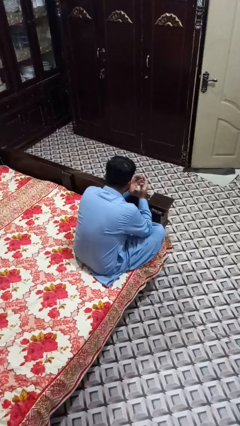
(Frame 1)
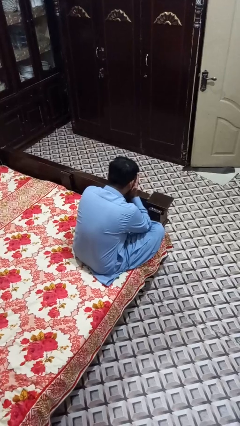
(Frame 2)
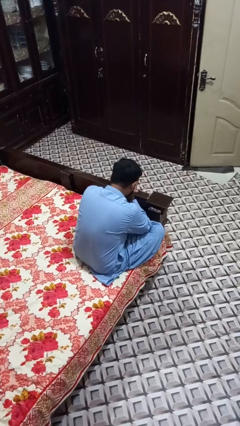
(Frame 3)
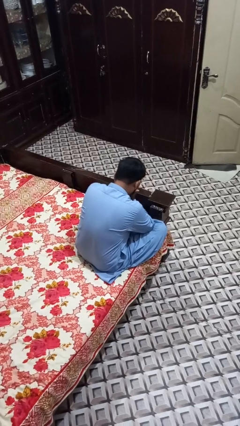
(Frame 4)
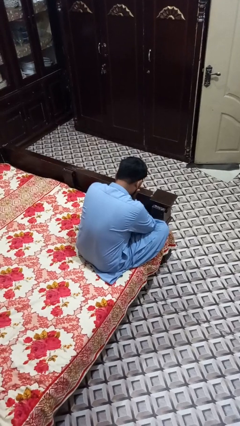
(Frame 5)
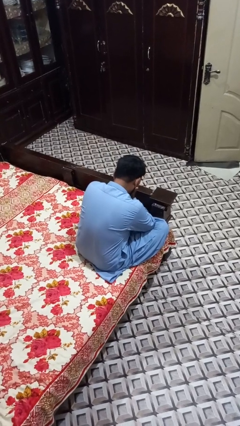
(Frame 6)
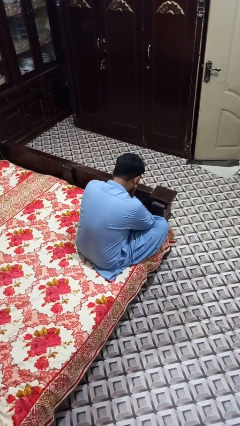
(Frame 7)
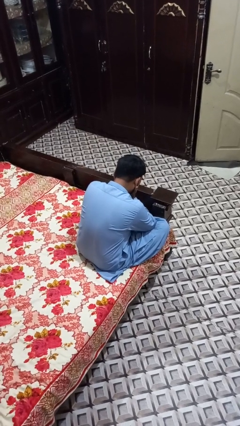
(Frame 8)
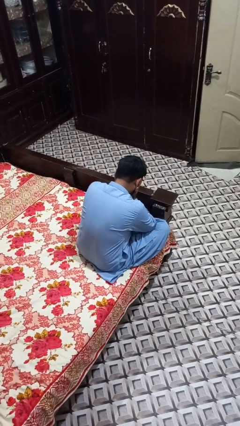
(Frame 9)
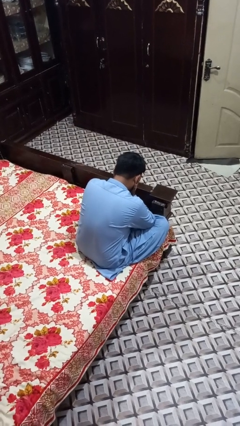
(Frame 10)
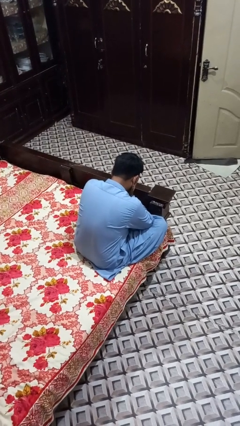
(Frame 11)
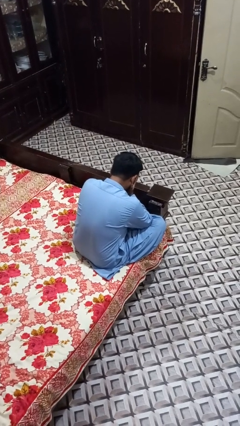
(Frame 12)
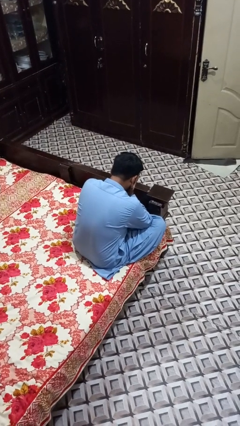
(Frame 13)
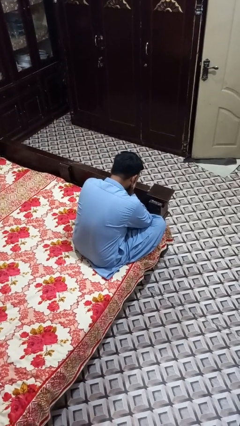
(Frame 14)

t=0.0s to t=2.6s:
person covers face with hands

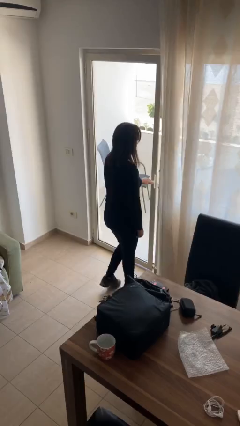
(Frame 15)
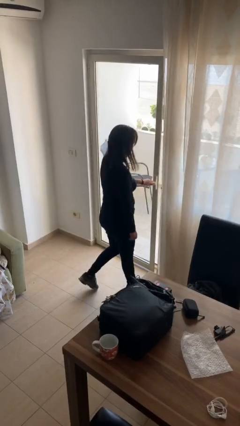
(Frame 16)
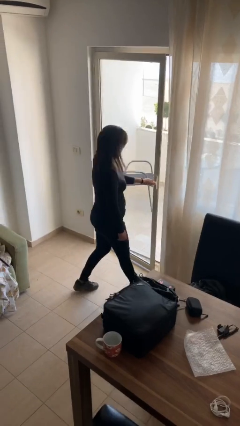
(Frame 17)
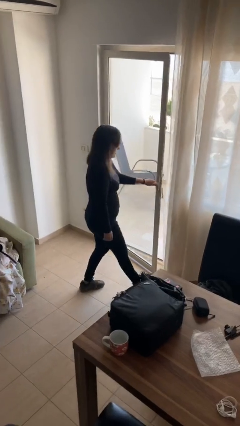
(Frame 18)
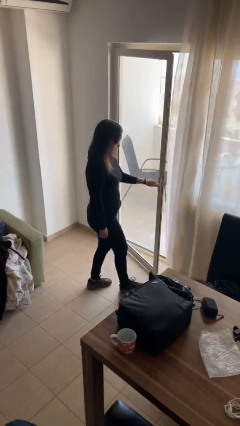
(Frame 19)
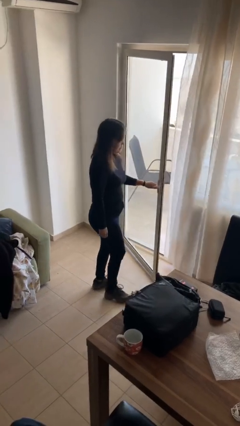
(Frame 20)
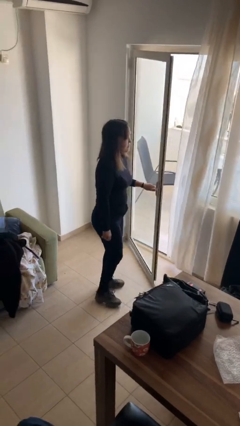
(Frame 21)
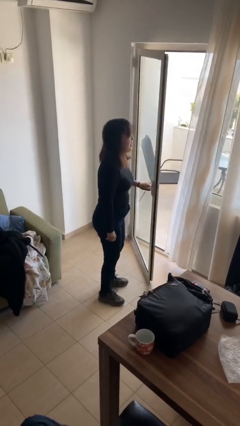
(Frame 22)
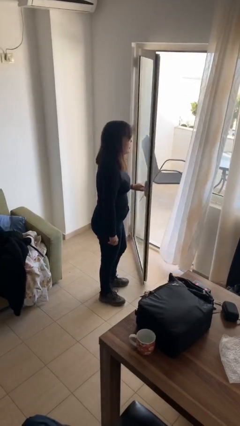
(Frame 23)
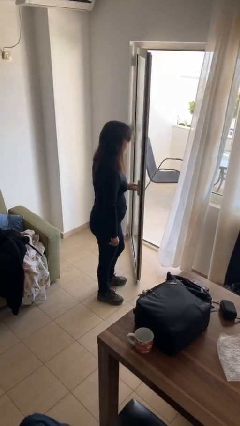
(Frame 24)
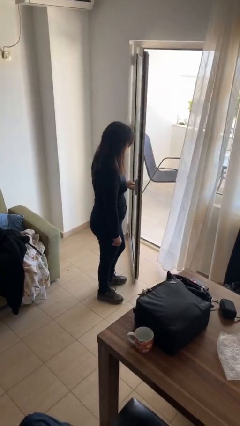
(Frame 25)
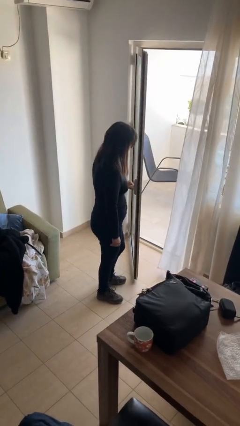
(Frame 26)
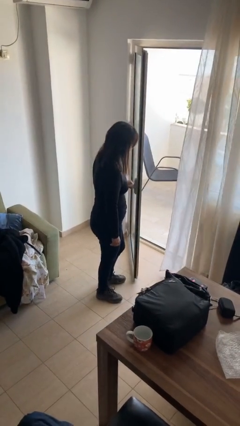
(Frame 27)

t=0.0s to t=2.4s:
person opens facility door

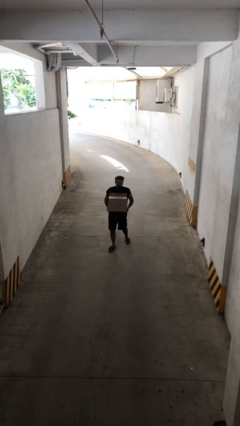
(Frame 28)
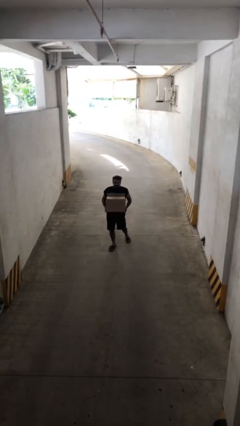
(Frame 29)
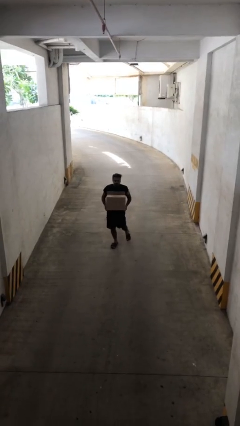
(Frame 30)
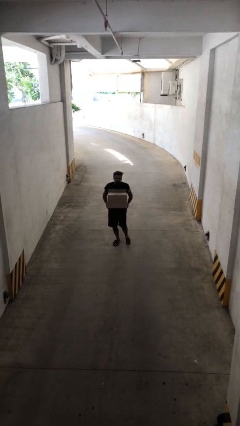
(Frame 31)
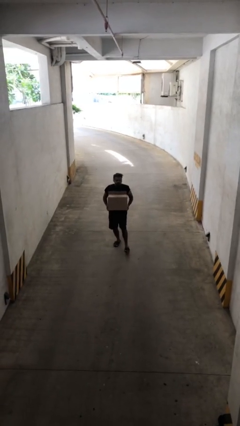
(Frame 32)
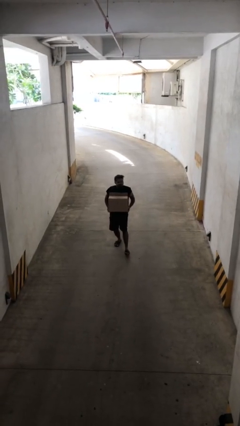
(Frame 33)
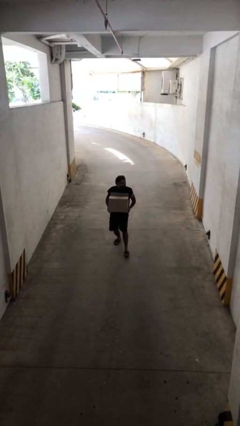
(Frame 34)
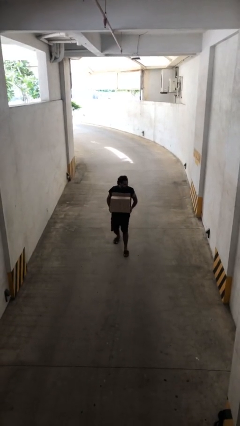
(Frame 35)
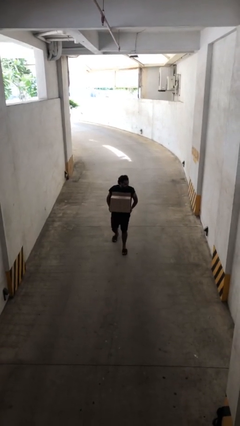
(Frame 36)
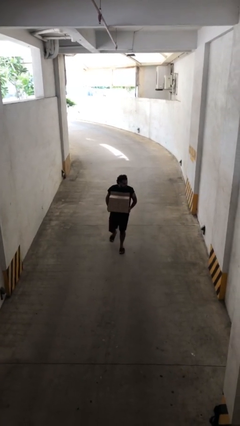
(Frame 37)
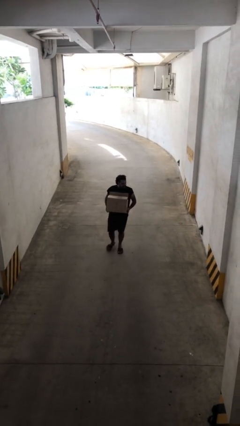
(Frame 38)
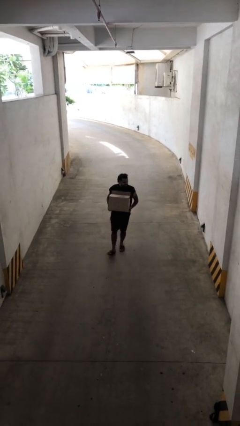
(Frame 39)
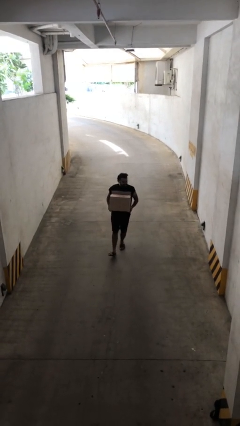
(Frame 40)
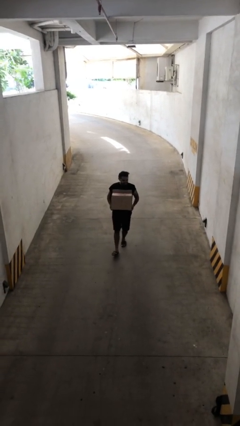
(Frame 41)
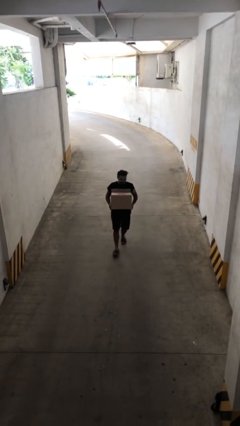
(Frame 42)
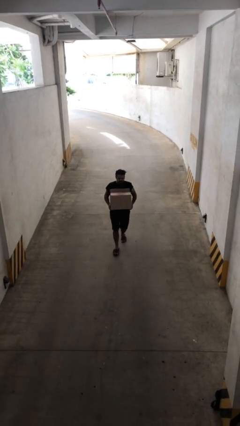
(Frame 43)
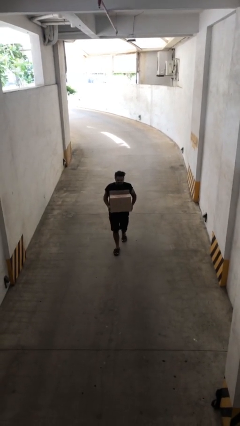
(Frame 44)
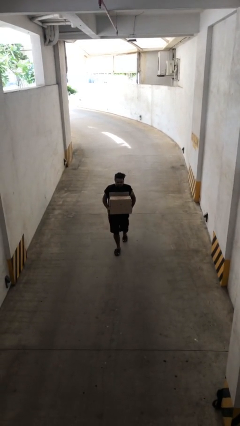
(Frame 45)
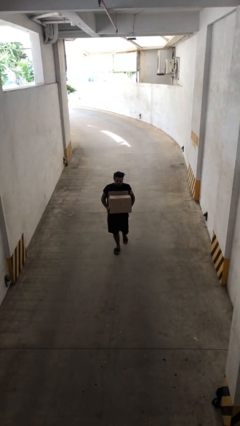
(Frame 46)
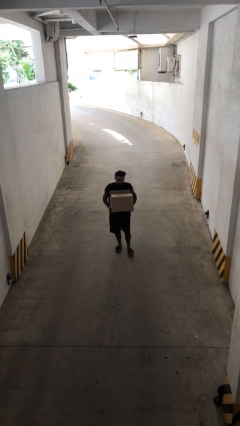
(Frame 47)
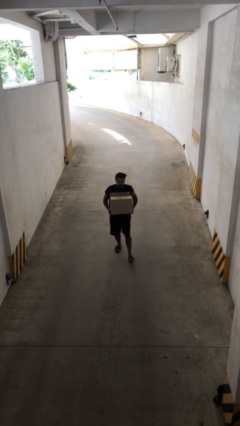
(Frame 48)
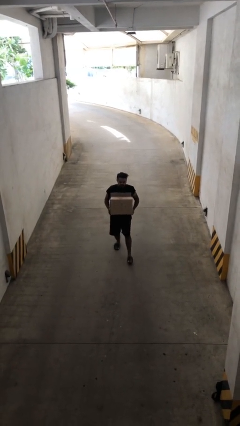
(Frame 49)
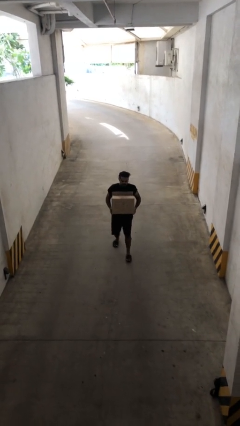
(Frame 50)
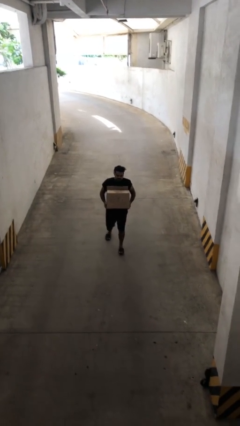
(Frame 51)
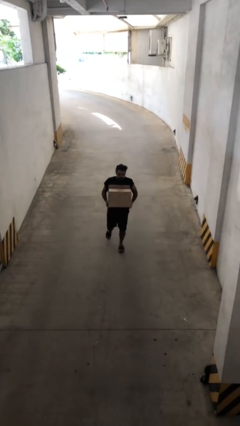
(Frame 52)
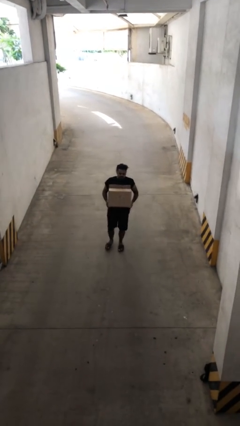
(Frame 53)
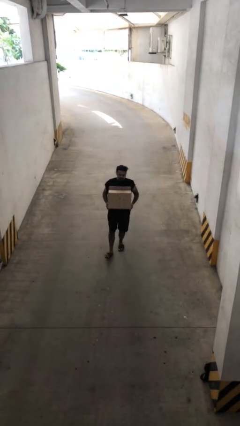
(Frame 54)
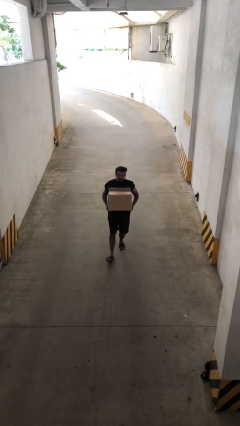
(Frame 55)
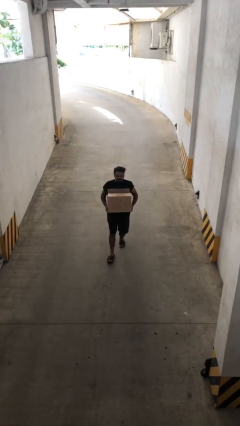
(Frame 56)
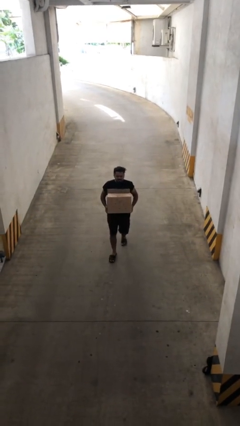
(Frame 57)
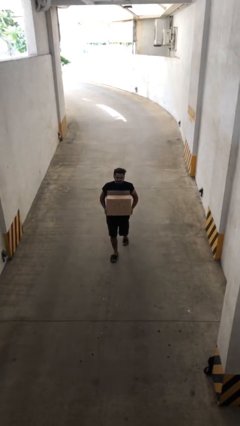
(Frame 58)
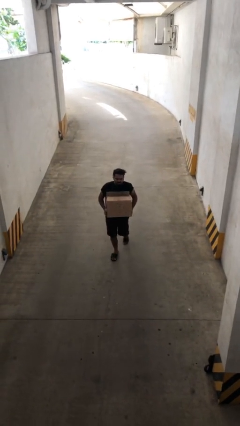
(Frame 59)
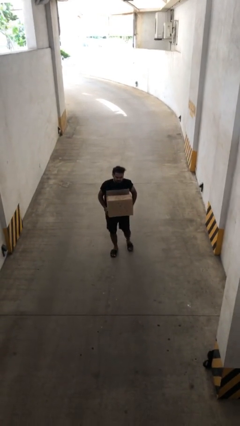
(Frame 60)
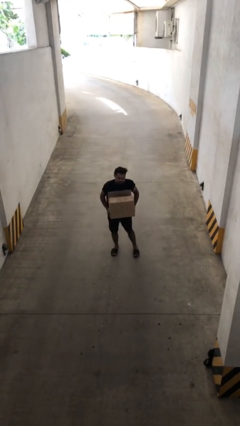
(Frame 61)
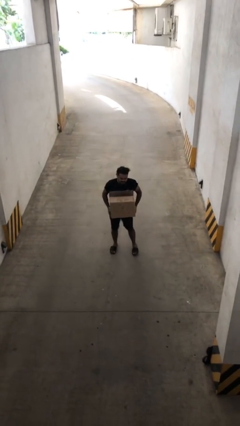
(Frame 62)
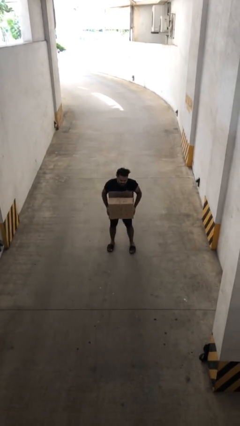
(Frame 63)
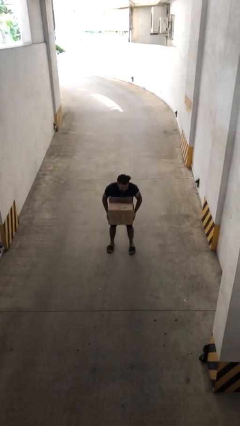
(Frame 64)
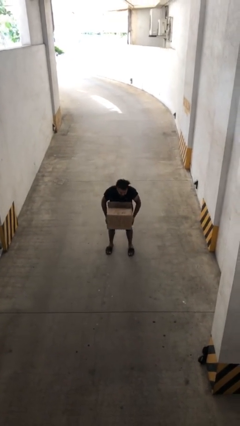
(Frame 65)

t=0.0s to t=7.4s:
person carries heavy object

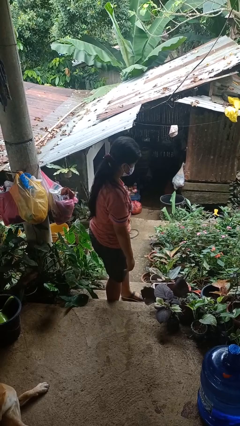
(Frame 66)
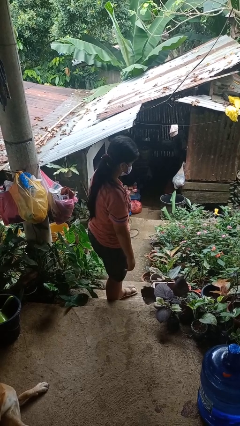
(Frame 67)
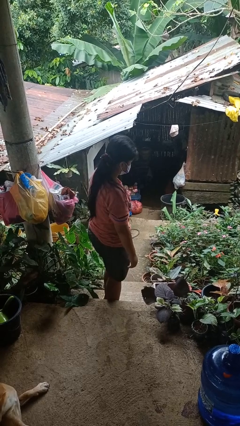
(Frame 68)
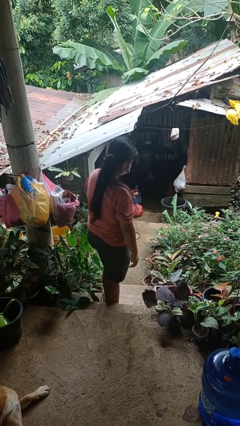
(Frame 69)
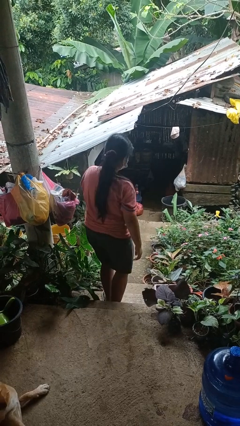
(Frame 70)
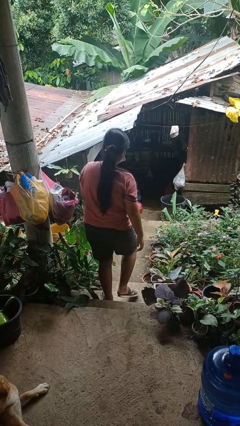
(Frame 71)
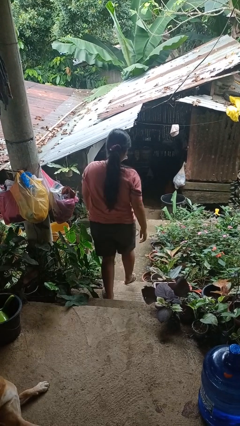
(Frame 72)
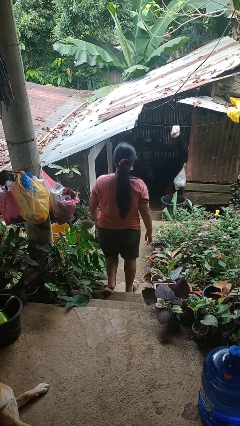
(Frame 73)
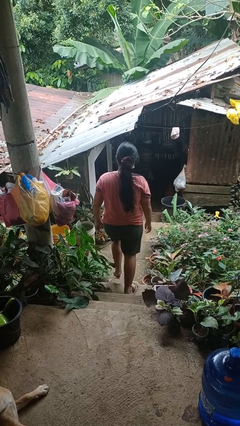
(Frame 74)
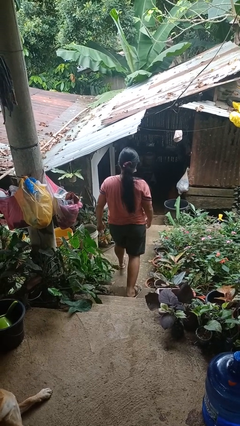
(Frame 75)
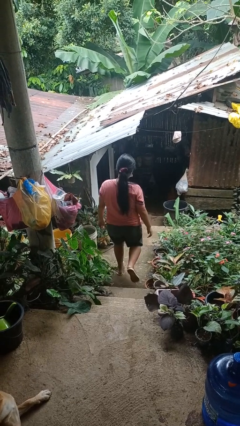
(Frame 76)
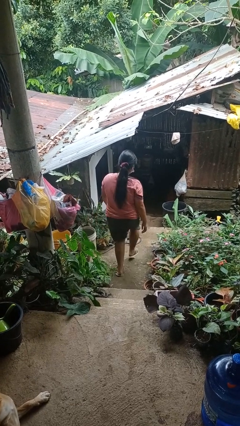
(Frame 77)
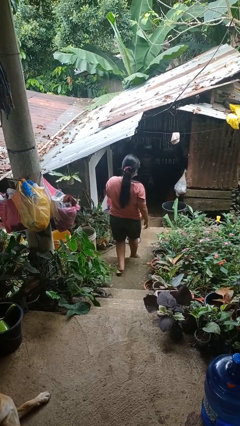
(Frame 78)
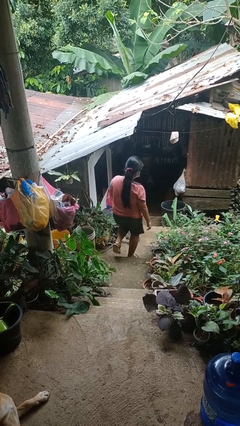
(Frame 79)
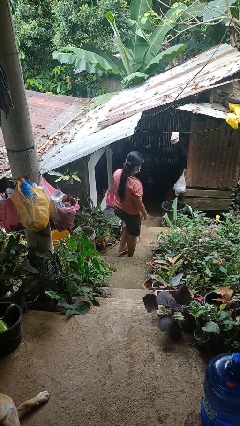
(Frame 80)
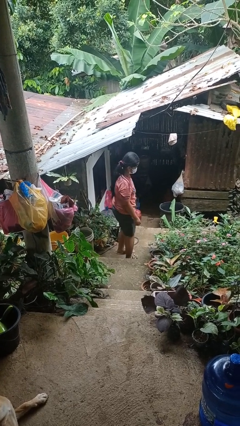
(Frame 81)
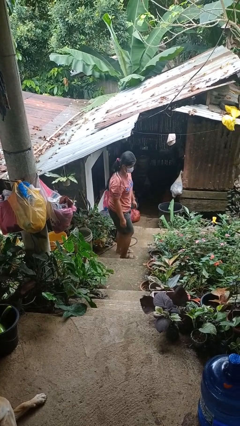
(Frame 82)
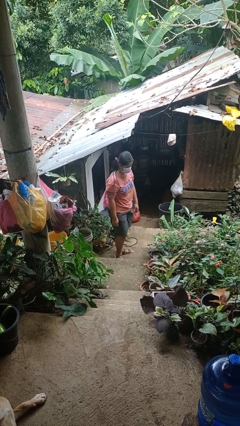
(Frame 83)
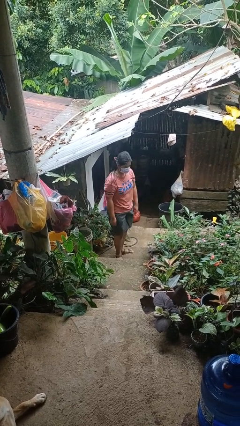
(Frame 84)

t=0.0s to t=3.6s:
person climbs down stairs

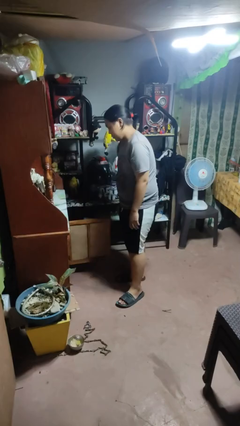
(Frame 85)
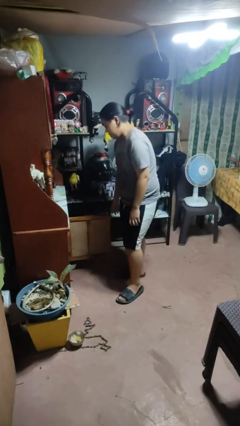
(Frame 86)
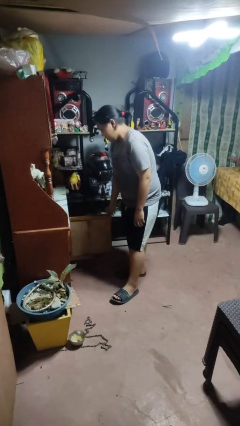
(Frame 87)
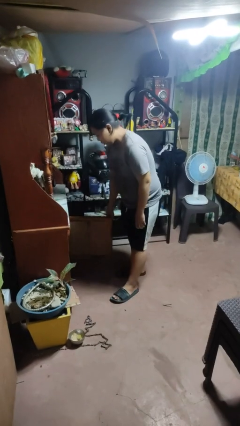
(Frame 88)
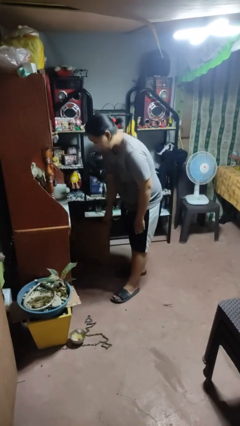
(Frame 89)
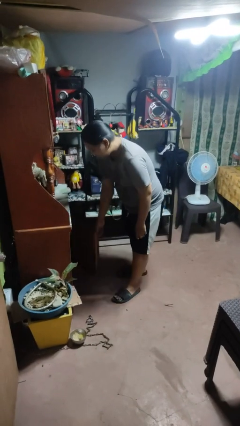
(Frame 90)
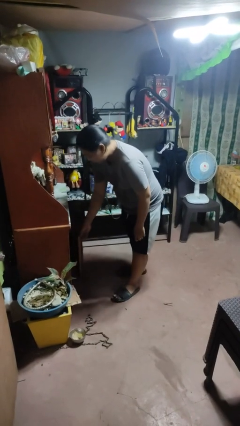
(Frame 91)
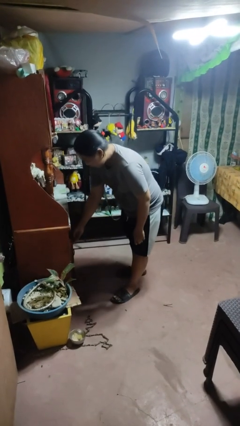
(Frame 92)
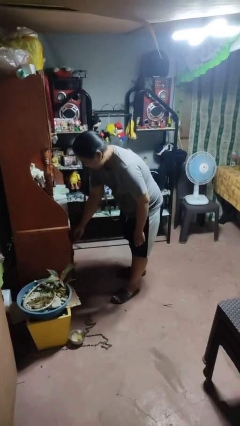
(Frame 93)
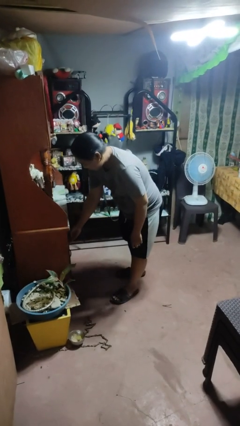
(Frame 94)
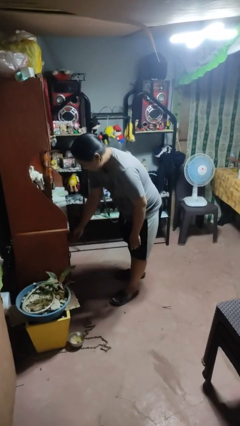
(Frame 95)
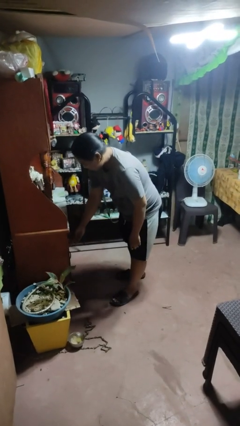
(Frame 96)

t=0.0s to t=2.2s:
person closes cabinet
